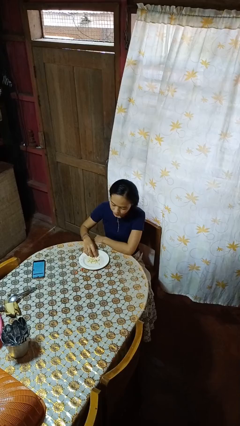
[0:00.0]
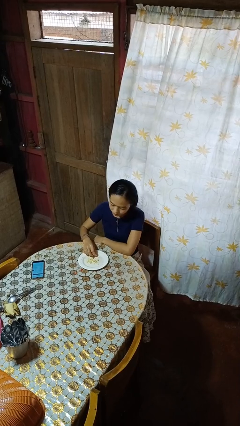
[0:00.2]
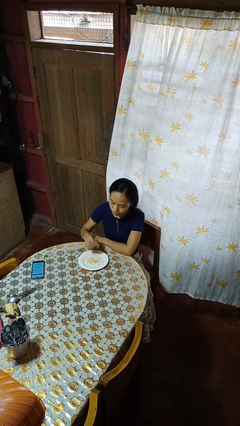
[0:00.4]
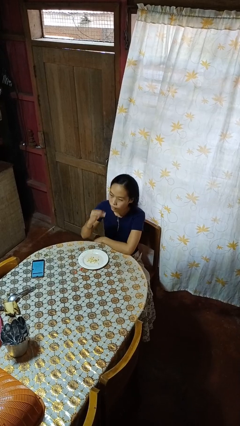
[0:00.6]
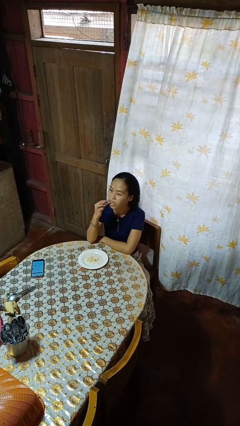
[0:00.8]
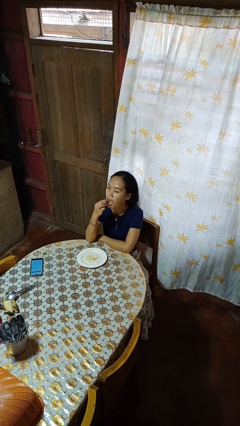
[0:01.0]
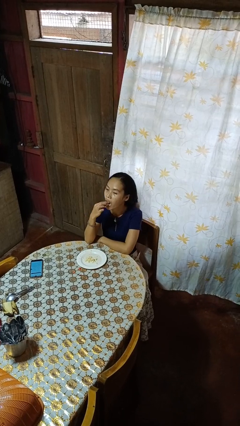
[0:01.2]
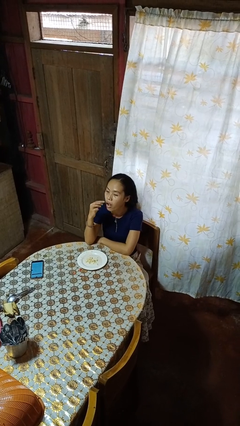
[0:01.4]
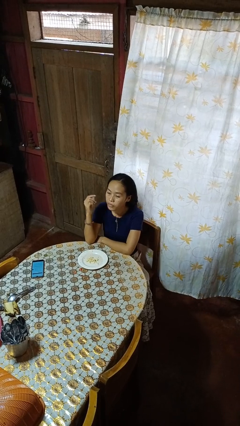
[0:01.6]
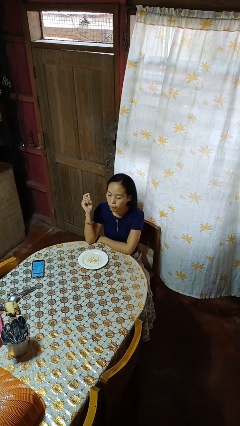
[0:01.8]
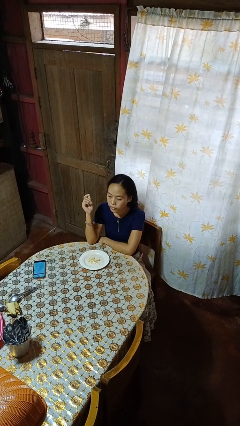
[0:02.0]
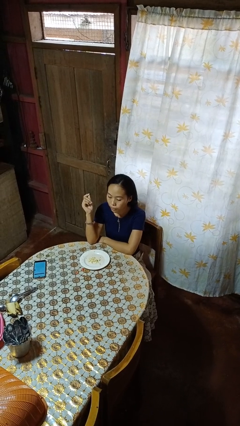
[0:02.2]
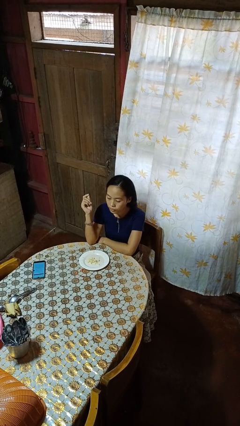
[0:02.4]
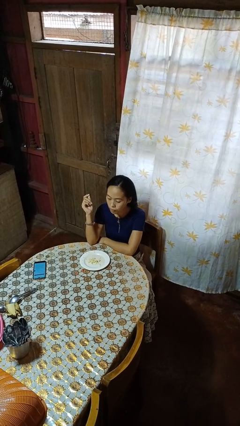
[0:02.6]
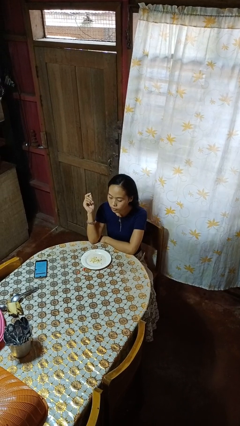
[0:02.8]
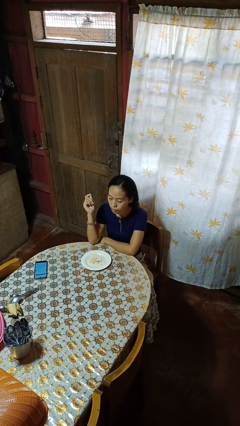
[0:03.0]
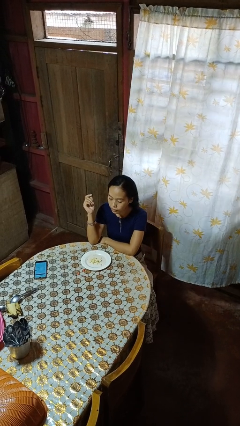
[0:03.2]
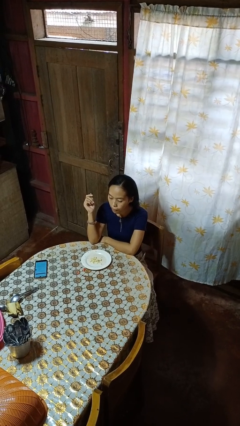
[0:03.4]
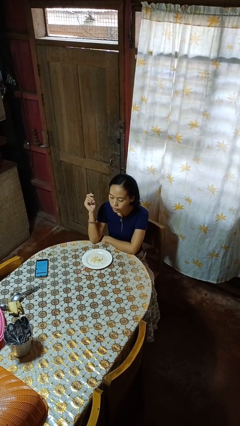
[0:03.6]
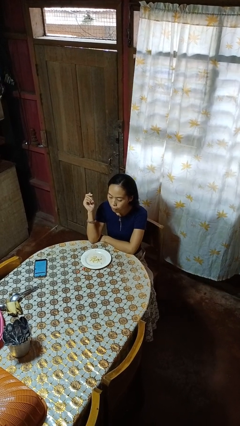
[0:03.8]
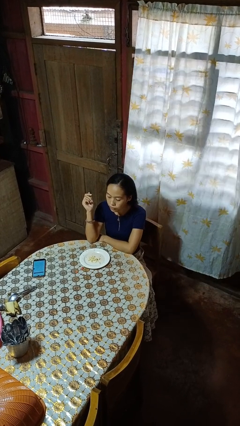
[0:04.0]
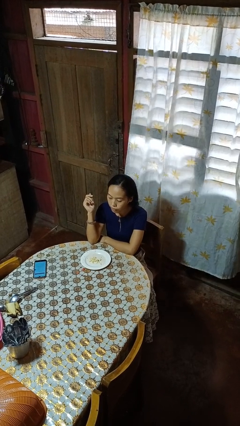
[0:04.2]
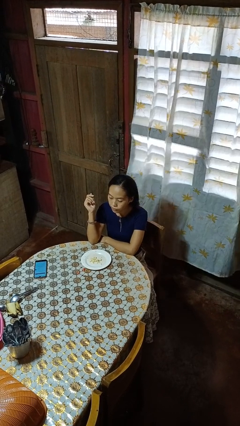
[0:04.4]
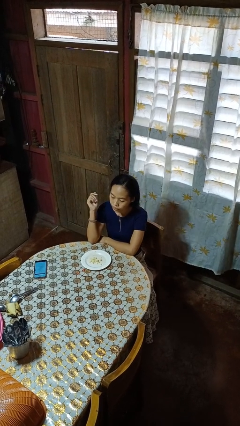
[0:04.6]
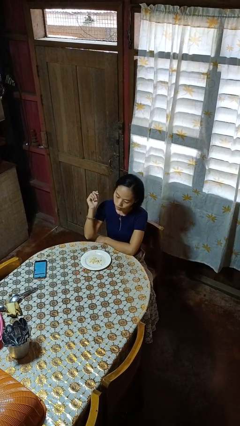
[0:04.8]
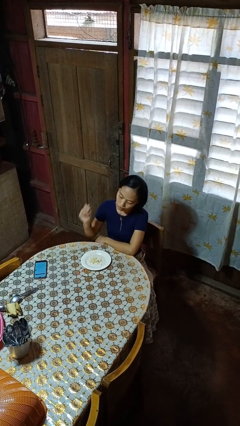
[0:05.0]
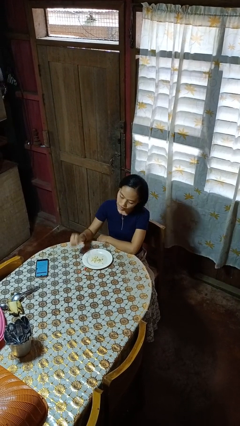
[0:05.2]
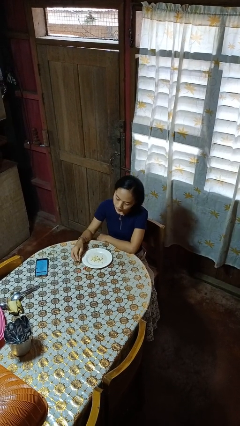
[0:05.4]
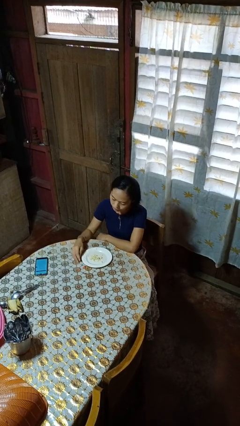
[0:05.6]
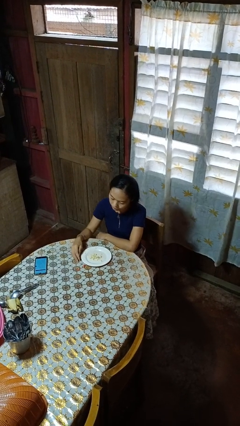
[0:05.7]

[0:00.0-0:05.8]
person eats with hands

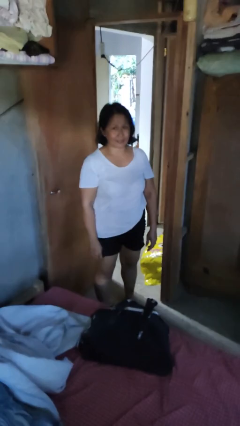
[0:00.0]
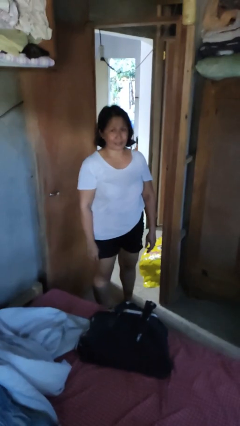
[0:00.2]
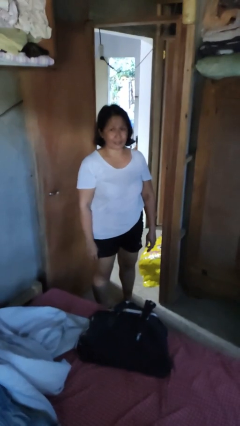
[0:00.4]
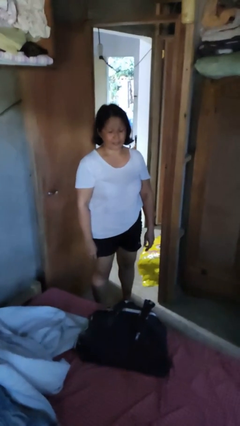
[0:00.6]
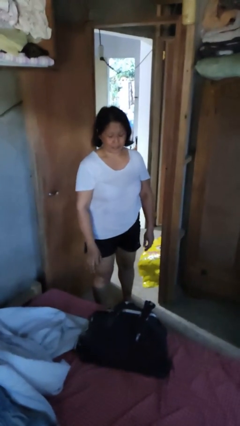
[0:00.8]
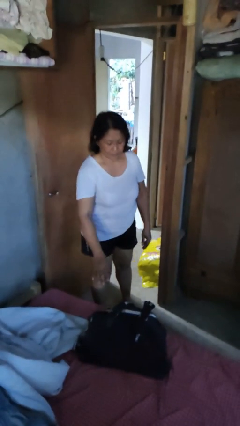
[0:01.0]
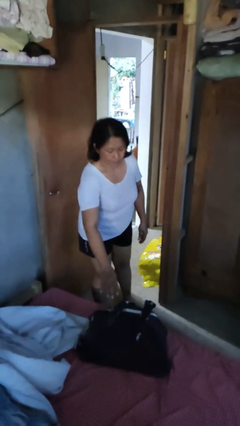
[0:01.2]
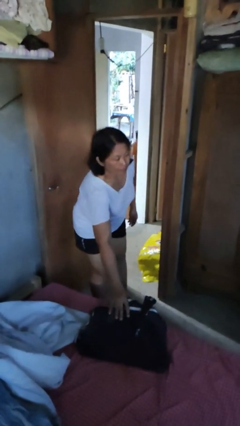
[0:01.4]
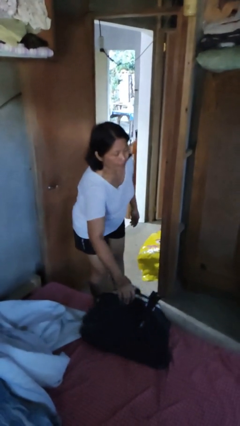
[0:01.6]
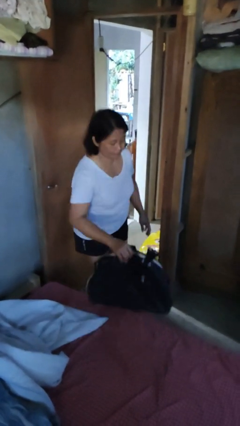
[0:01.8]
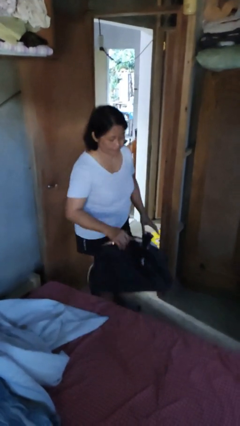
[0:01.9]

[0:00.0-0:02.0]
person picks up object from bed

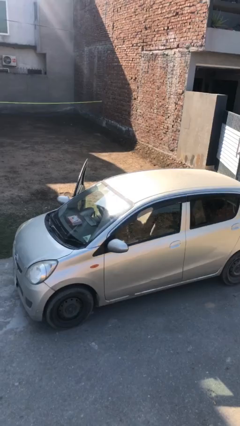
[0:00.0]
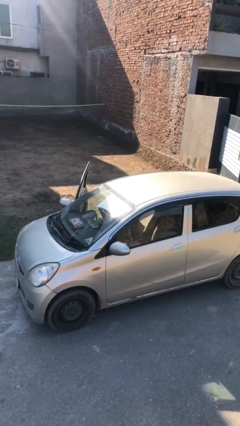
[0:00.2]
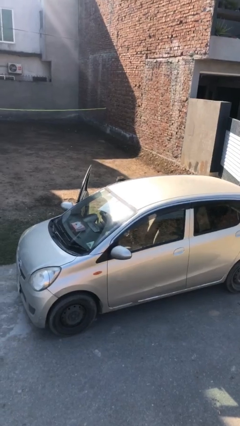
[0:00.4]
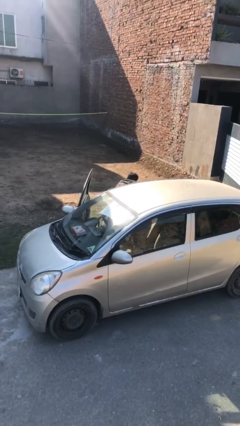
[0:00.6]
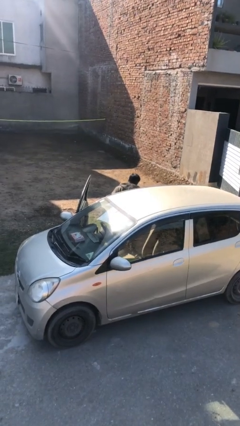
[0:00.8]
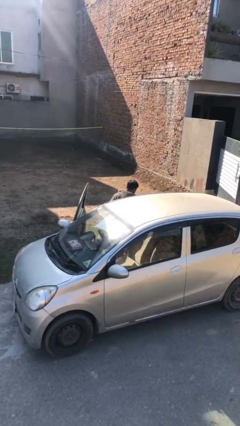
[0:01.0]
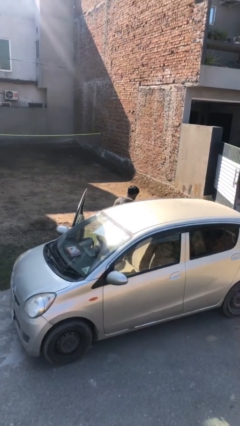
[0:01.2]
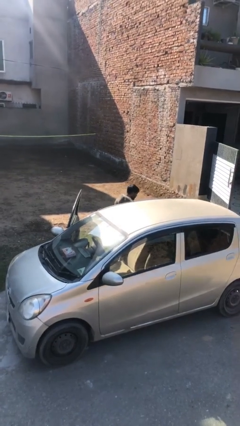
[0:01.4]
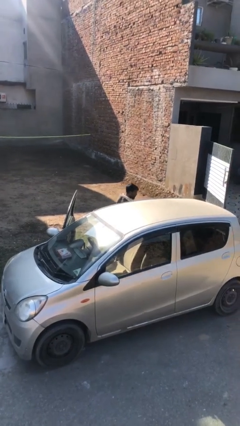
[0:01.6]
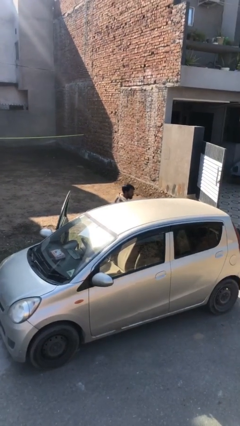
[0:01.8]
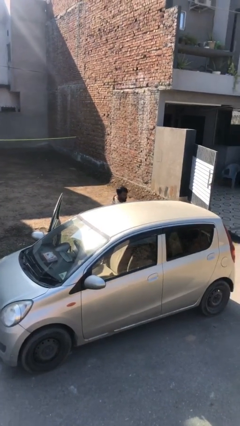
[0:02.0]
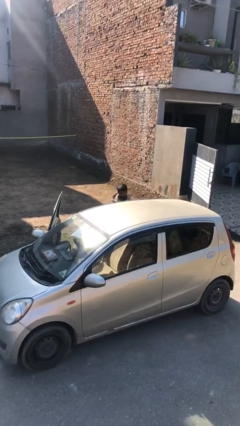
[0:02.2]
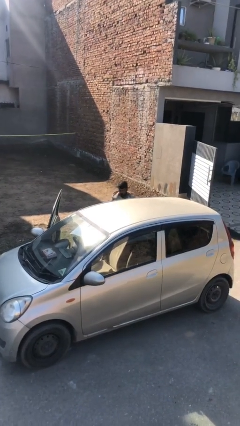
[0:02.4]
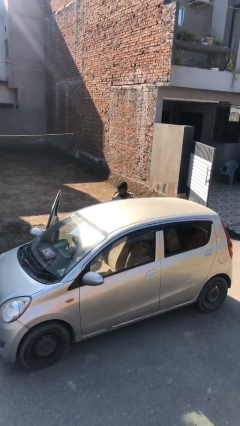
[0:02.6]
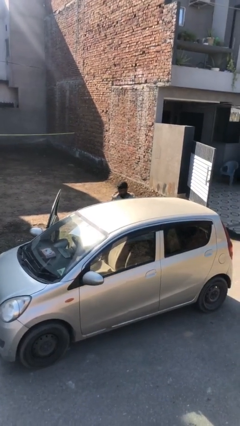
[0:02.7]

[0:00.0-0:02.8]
person exits car

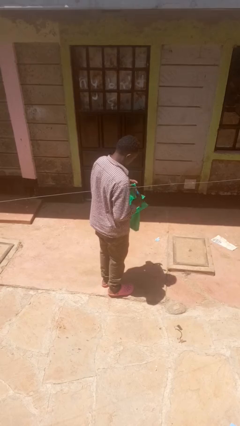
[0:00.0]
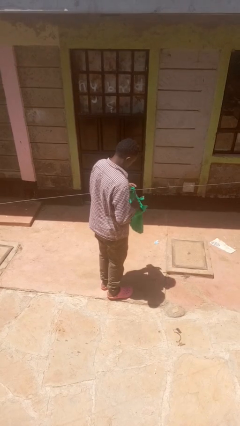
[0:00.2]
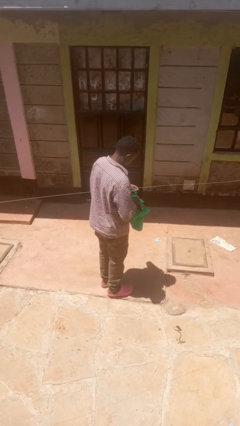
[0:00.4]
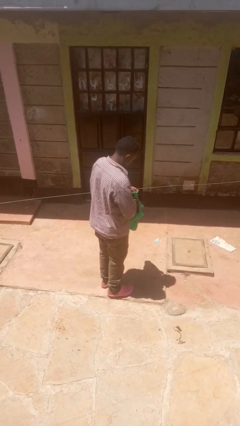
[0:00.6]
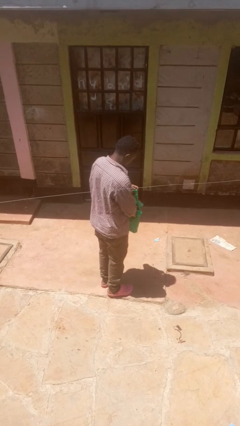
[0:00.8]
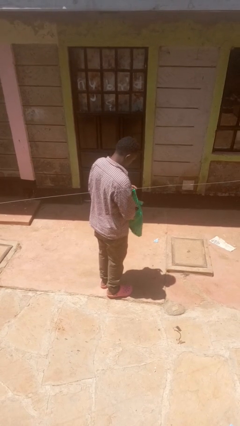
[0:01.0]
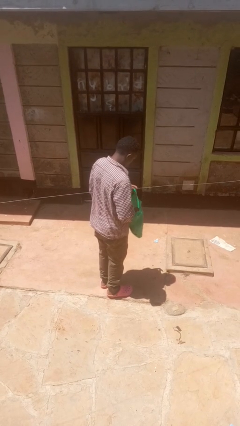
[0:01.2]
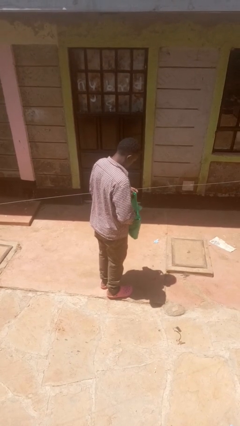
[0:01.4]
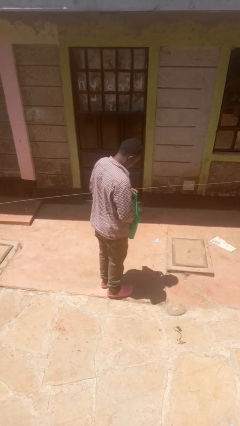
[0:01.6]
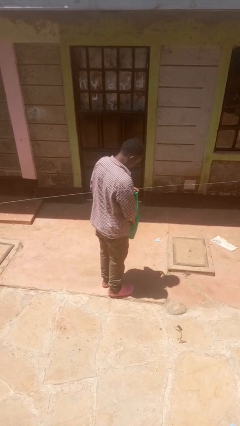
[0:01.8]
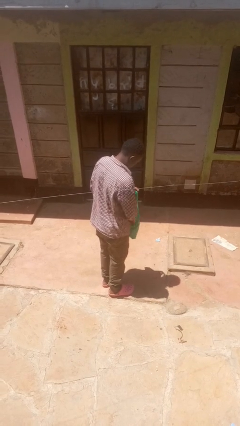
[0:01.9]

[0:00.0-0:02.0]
person puts object into bag

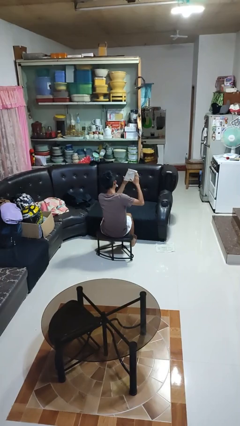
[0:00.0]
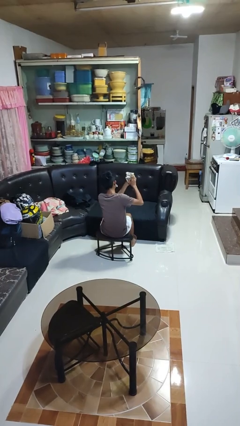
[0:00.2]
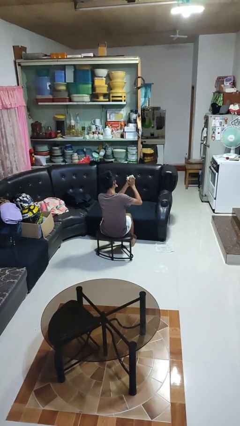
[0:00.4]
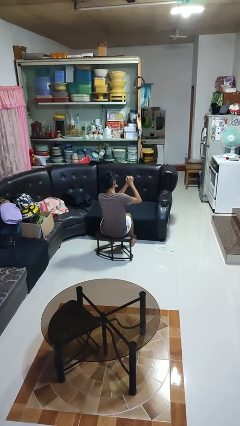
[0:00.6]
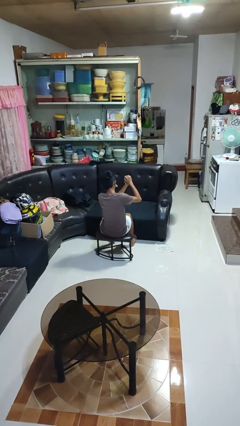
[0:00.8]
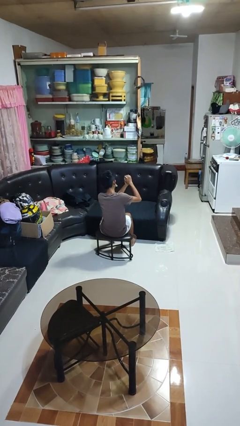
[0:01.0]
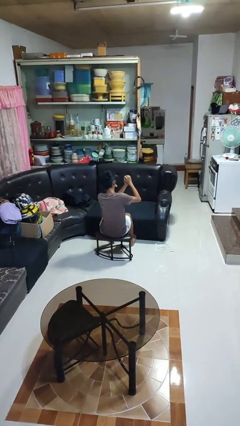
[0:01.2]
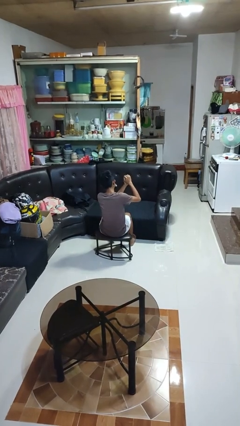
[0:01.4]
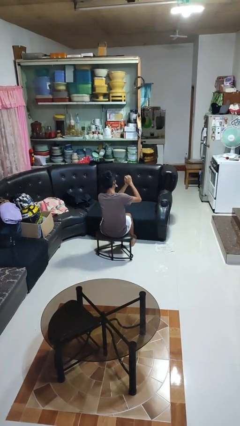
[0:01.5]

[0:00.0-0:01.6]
person crumples paper

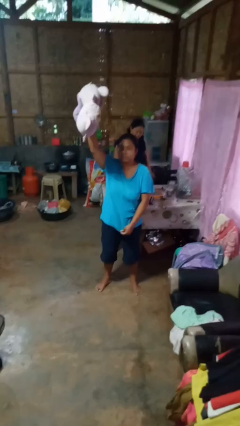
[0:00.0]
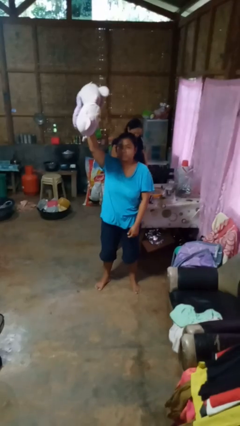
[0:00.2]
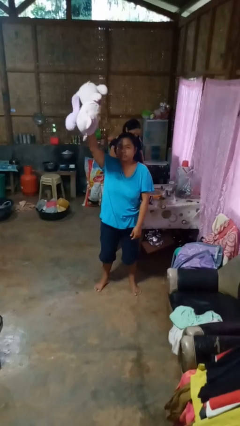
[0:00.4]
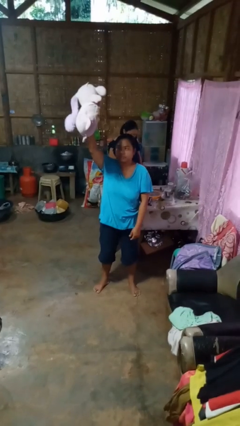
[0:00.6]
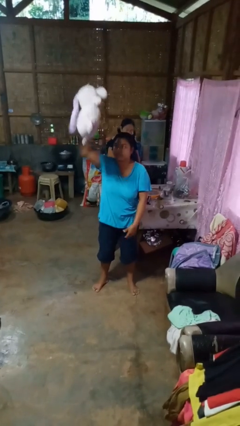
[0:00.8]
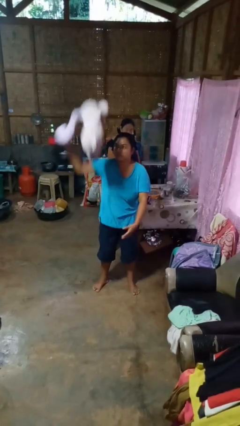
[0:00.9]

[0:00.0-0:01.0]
person drops object

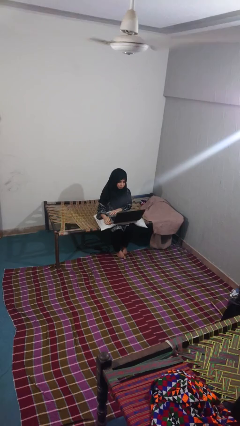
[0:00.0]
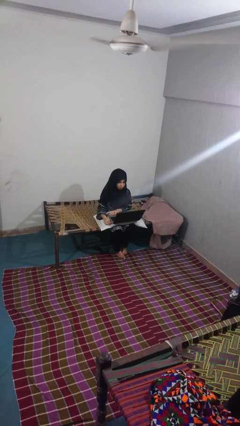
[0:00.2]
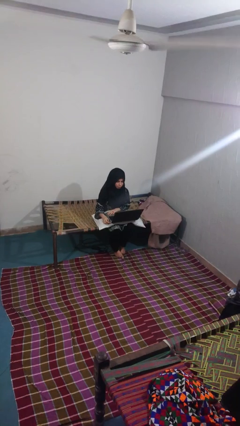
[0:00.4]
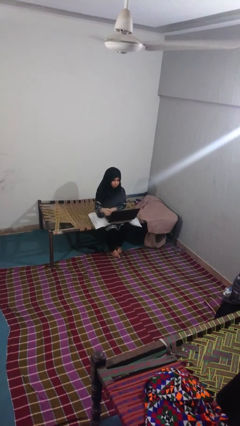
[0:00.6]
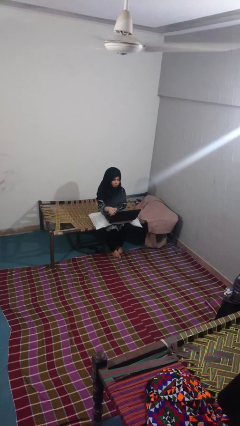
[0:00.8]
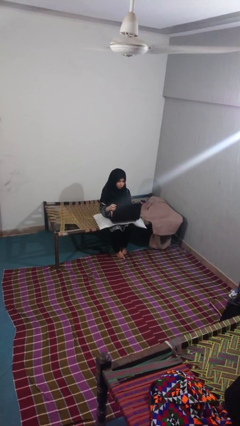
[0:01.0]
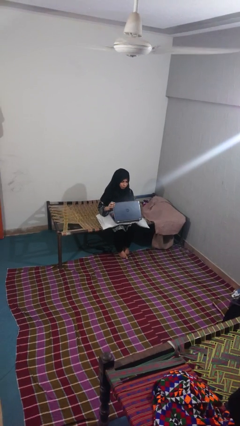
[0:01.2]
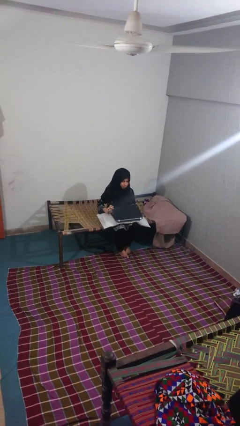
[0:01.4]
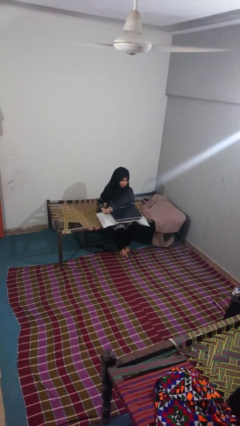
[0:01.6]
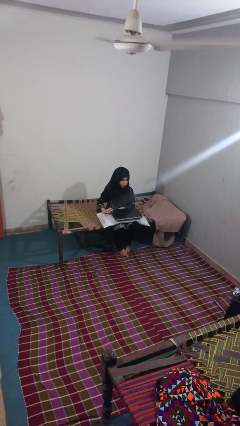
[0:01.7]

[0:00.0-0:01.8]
person closes laptop

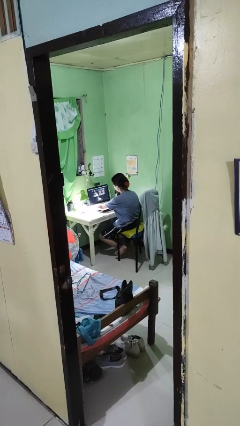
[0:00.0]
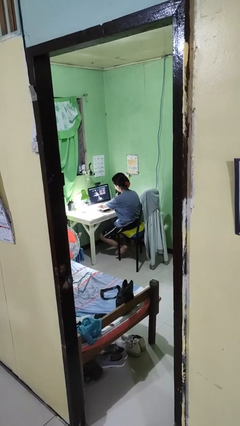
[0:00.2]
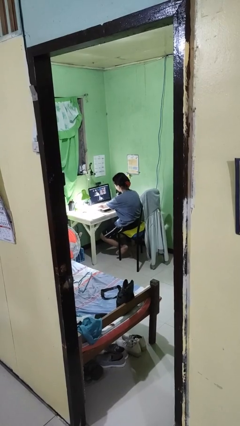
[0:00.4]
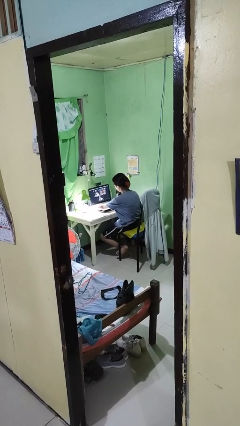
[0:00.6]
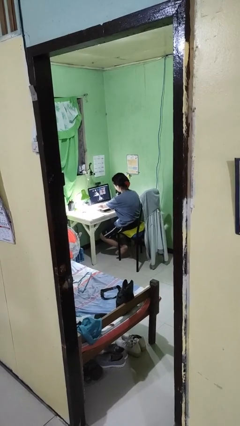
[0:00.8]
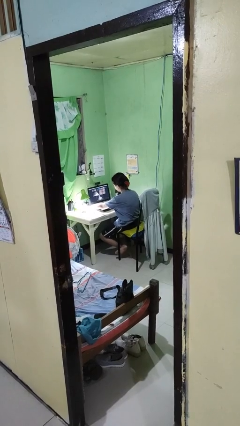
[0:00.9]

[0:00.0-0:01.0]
person turns off lamp
